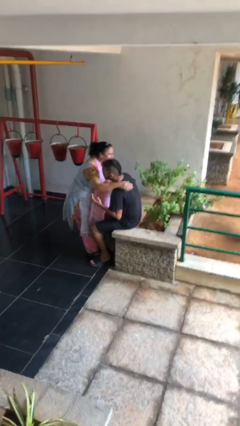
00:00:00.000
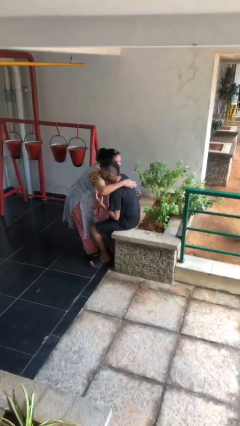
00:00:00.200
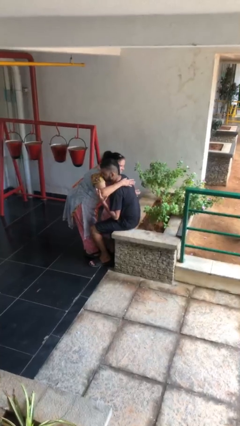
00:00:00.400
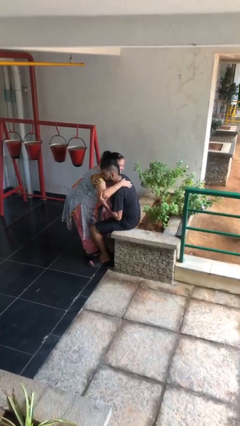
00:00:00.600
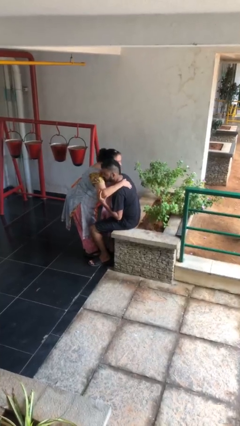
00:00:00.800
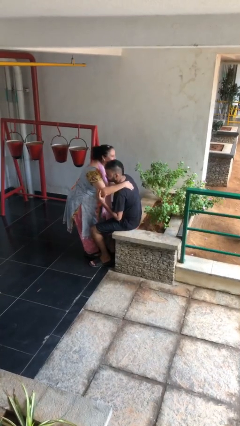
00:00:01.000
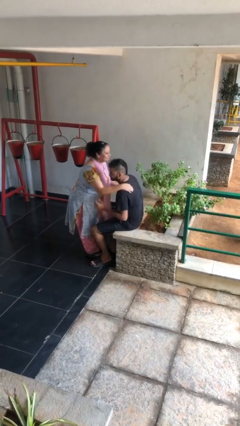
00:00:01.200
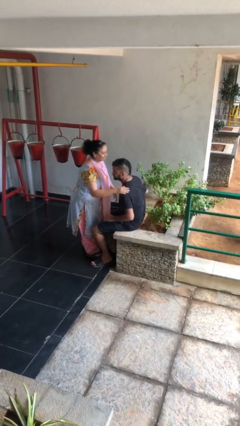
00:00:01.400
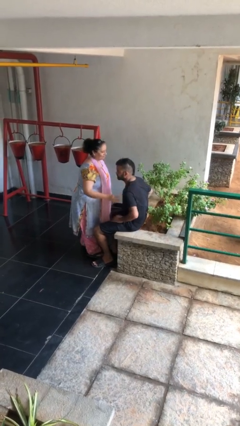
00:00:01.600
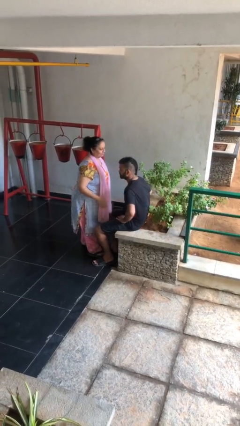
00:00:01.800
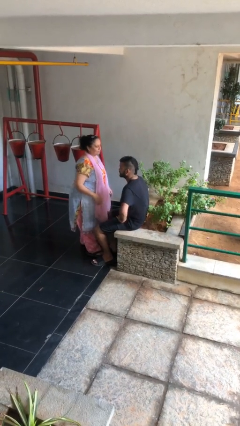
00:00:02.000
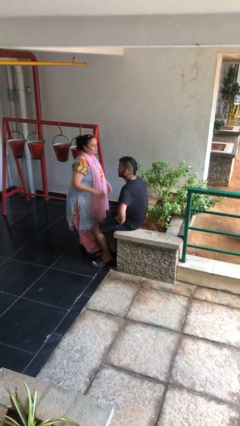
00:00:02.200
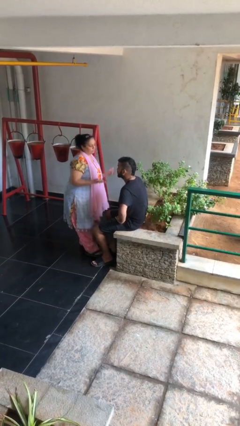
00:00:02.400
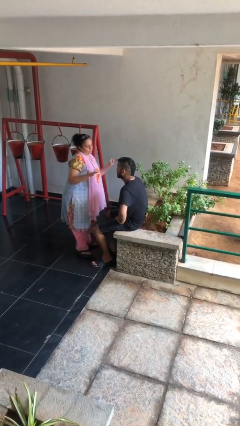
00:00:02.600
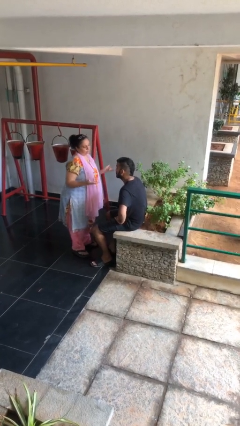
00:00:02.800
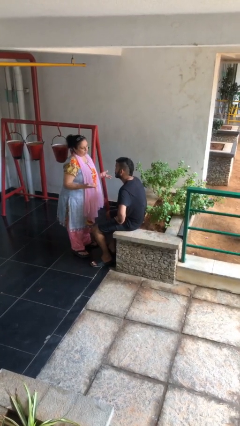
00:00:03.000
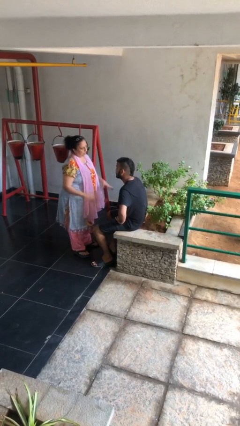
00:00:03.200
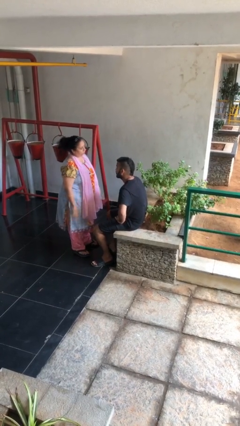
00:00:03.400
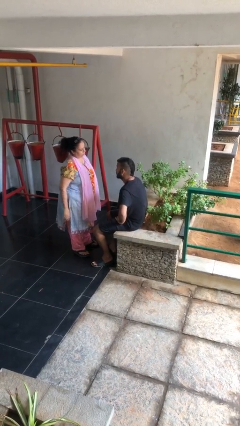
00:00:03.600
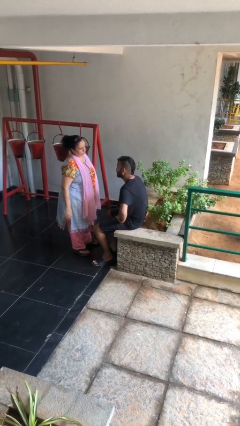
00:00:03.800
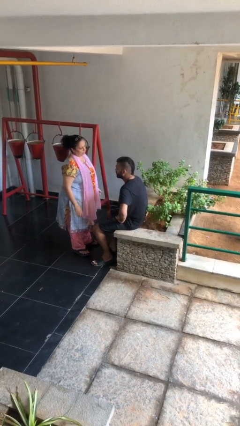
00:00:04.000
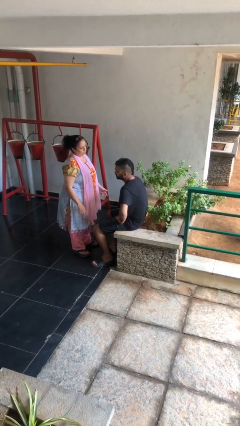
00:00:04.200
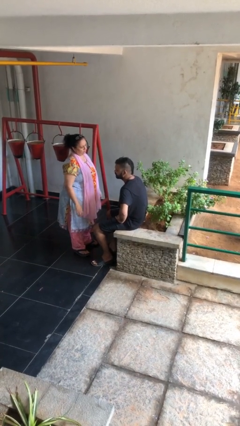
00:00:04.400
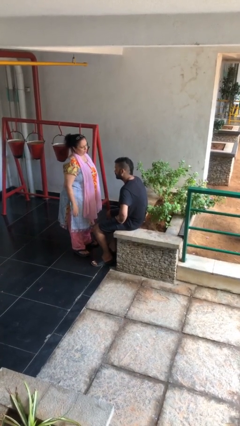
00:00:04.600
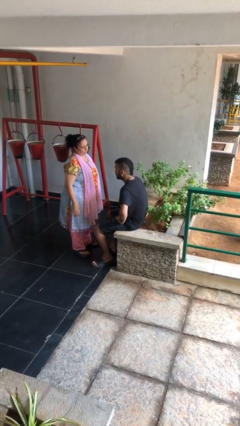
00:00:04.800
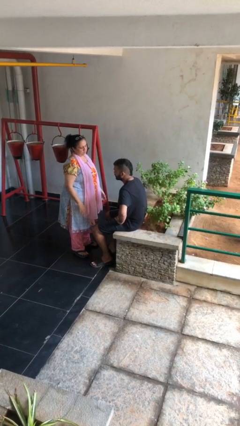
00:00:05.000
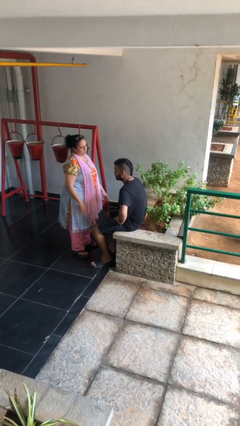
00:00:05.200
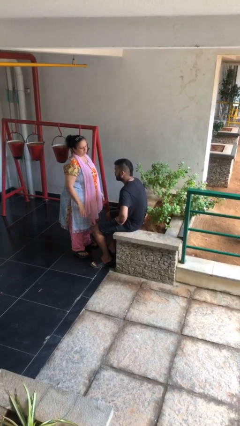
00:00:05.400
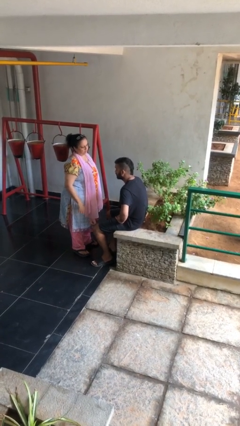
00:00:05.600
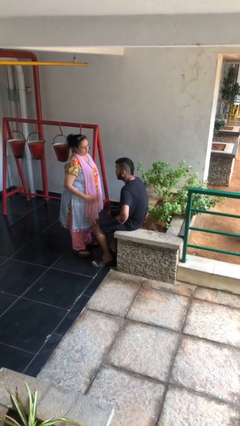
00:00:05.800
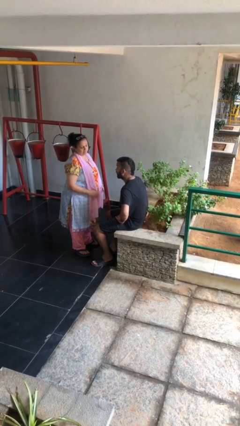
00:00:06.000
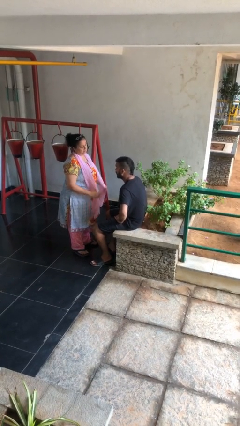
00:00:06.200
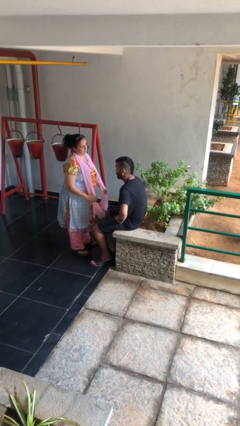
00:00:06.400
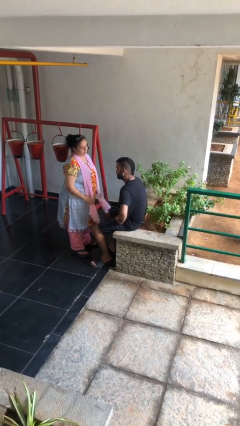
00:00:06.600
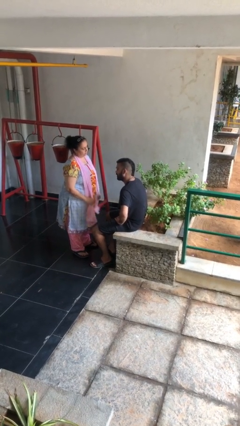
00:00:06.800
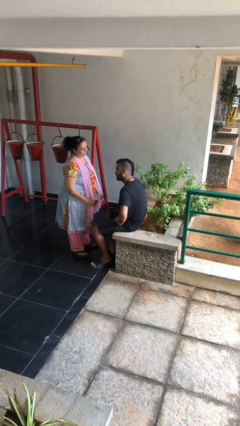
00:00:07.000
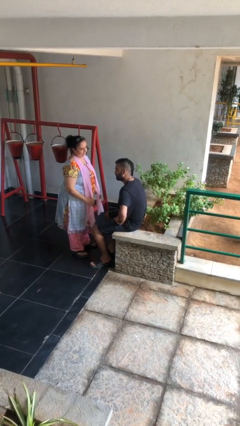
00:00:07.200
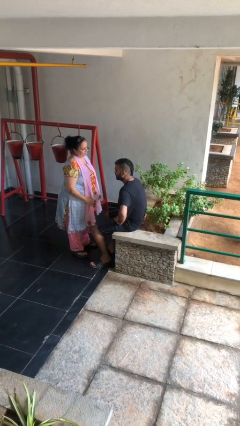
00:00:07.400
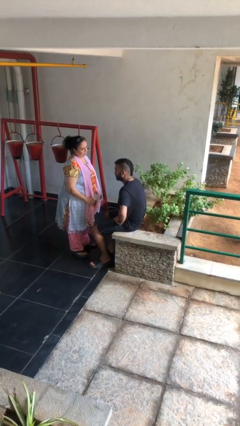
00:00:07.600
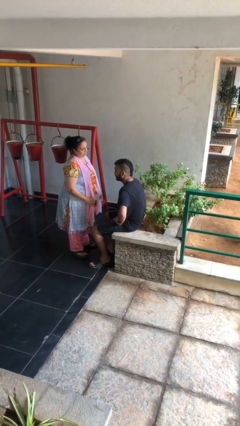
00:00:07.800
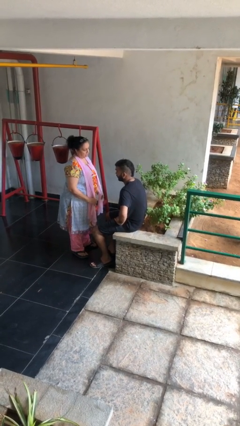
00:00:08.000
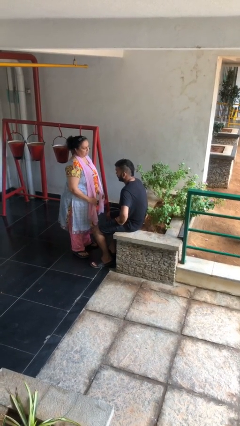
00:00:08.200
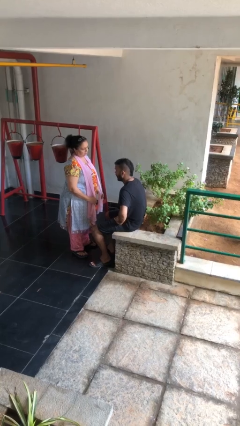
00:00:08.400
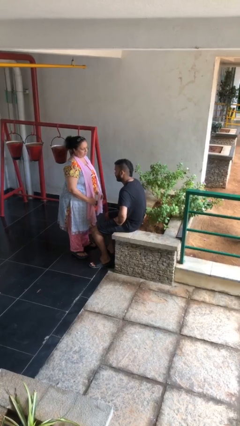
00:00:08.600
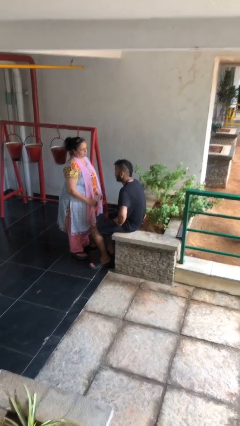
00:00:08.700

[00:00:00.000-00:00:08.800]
person embraces person

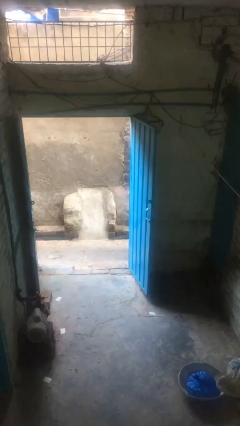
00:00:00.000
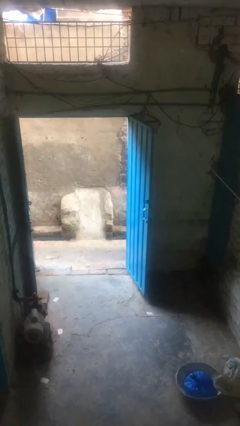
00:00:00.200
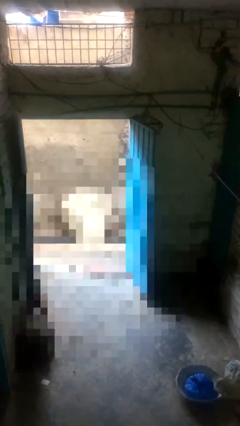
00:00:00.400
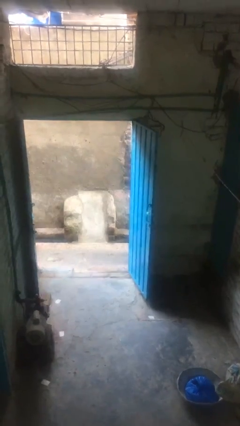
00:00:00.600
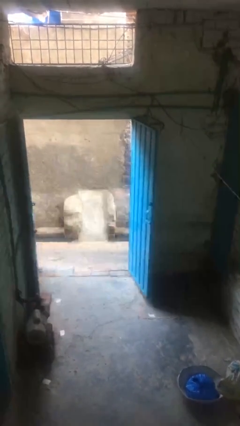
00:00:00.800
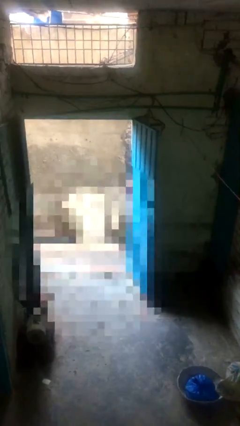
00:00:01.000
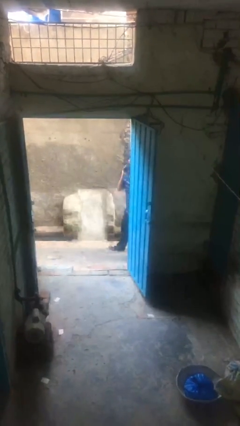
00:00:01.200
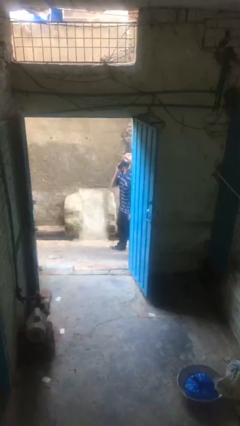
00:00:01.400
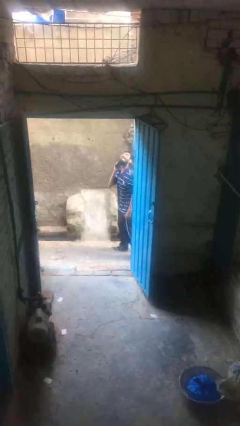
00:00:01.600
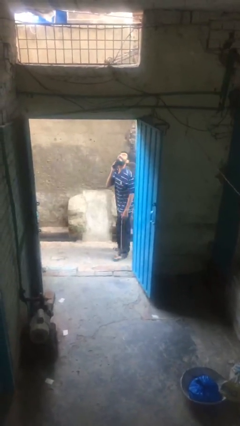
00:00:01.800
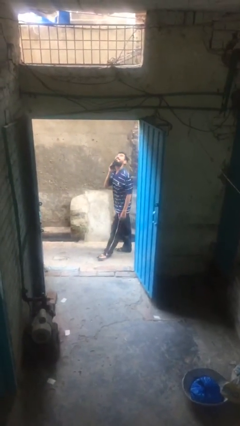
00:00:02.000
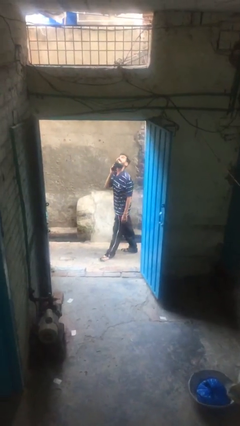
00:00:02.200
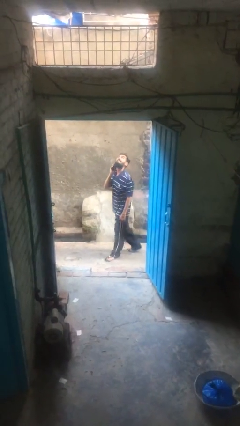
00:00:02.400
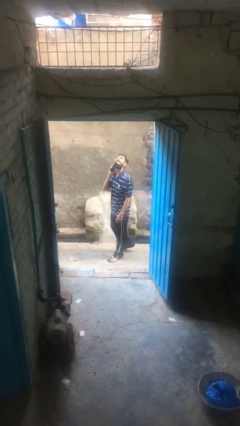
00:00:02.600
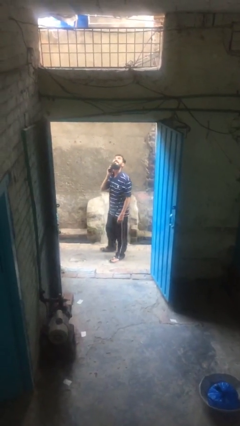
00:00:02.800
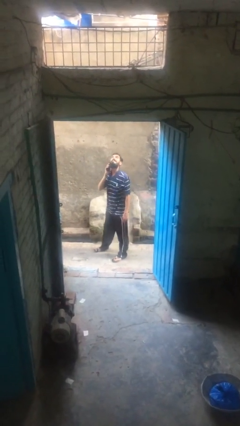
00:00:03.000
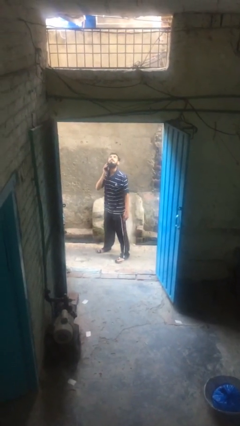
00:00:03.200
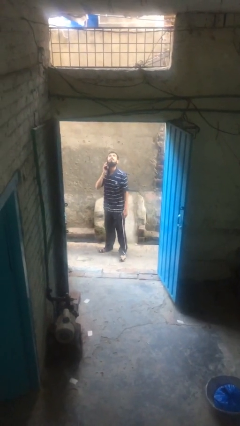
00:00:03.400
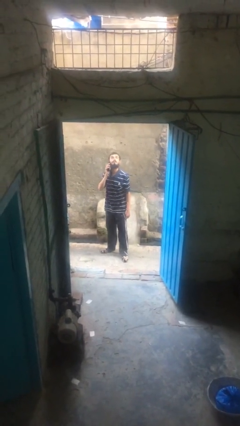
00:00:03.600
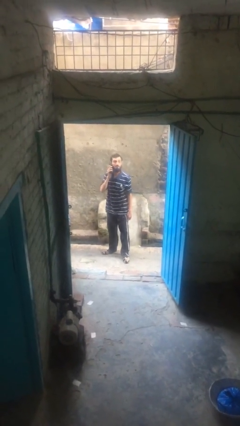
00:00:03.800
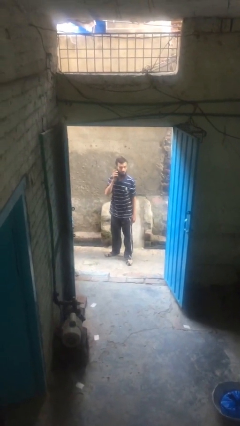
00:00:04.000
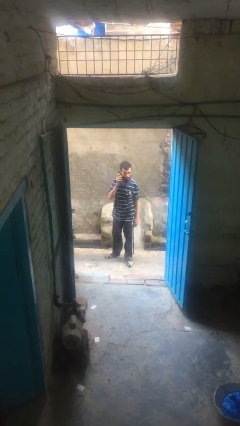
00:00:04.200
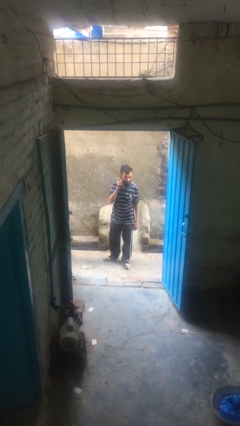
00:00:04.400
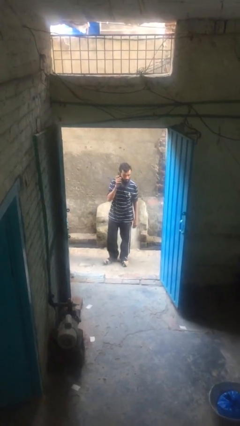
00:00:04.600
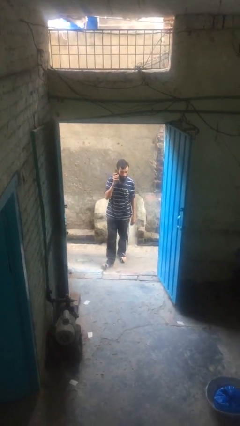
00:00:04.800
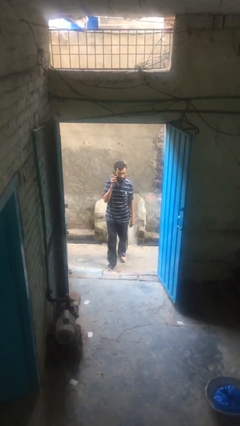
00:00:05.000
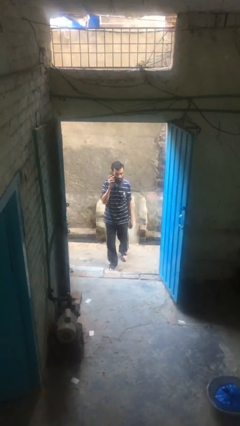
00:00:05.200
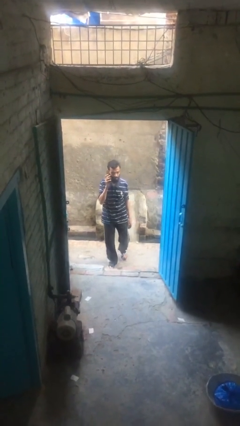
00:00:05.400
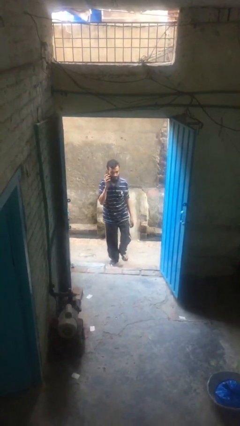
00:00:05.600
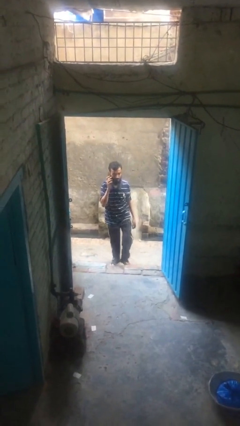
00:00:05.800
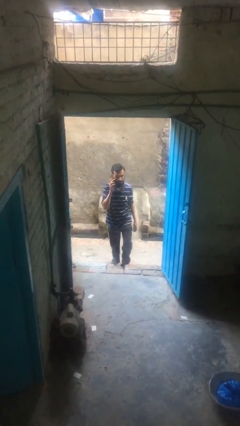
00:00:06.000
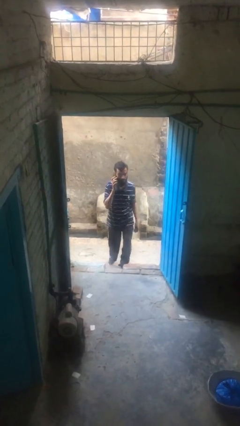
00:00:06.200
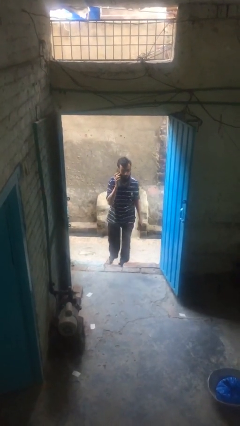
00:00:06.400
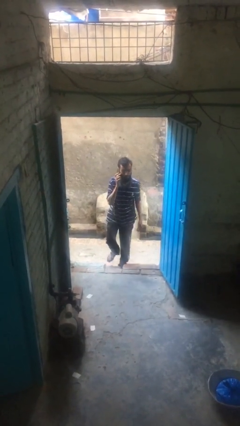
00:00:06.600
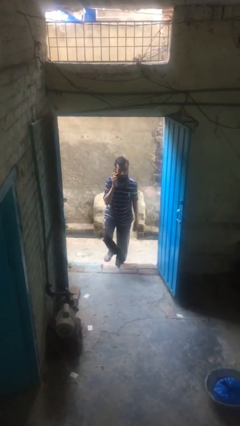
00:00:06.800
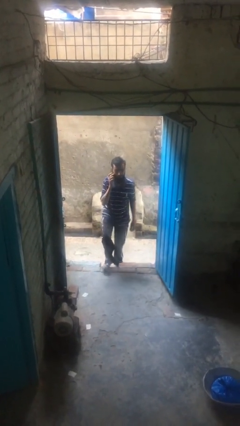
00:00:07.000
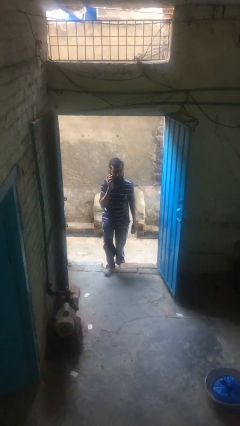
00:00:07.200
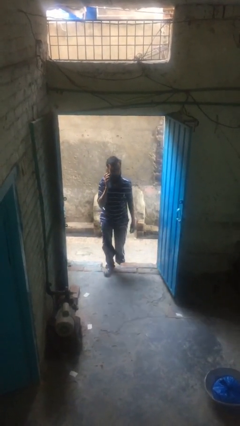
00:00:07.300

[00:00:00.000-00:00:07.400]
person enters scene through structure

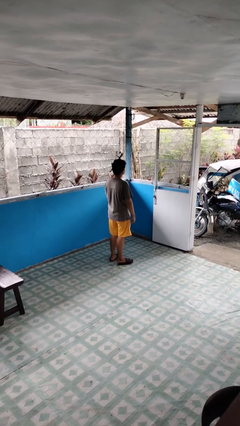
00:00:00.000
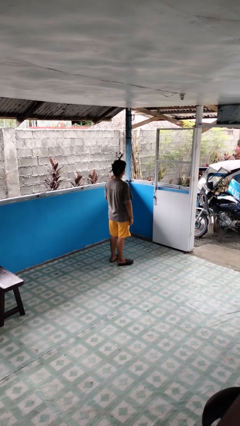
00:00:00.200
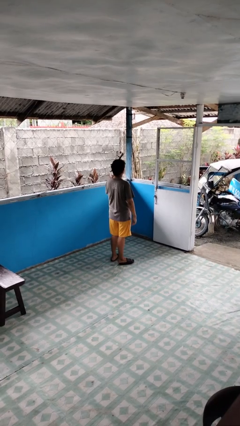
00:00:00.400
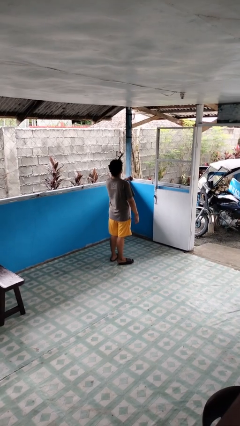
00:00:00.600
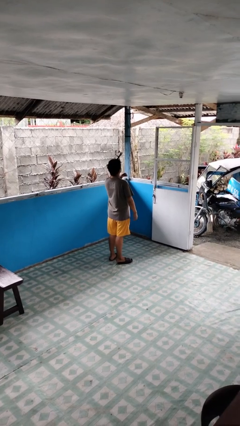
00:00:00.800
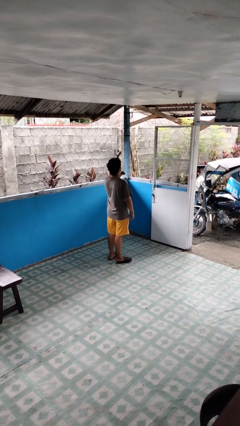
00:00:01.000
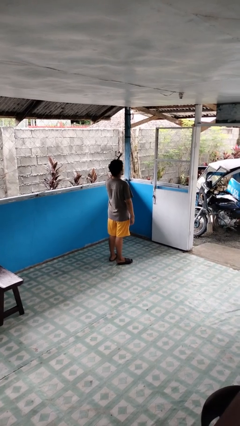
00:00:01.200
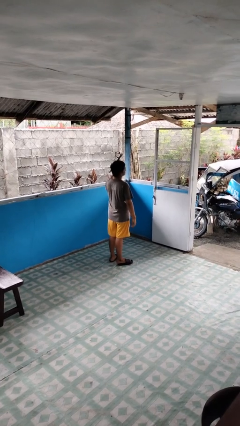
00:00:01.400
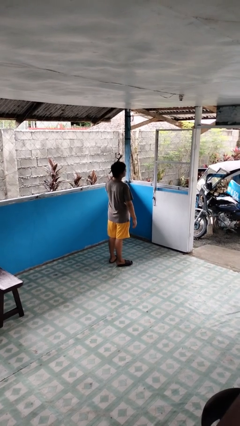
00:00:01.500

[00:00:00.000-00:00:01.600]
person gestures cut
